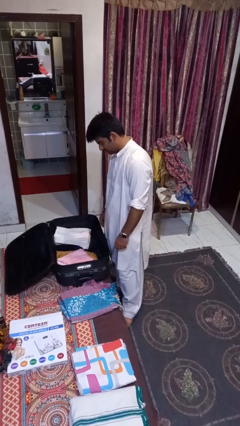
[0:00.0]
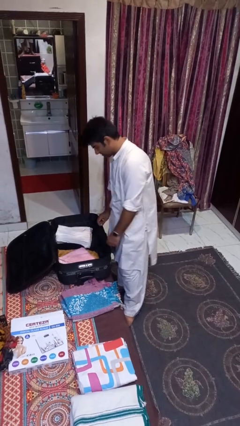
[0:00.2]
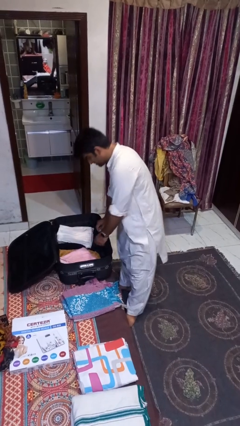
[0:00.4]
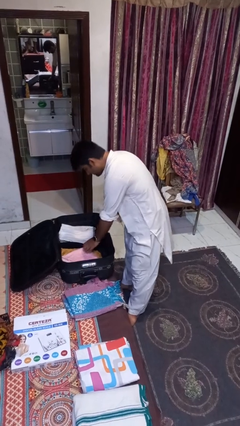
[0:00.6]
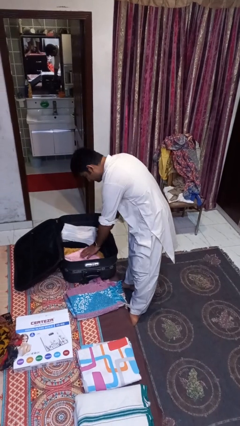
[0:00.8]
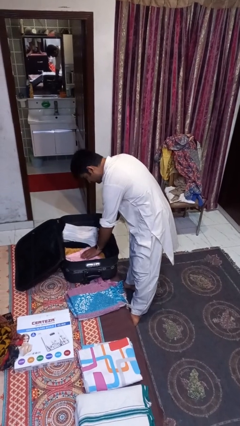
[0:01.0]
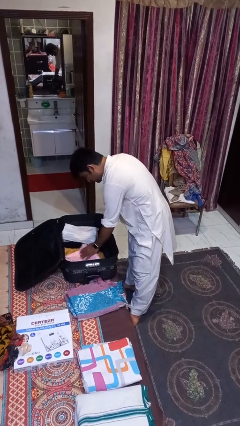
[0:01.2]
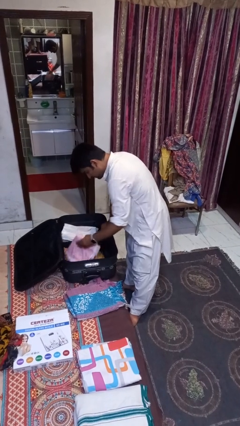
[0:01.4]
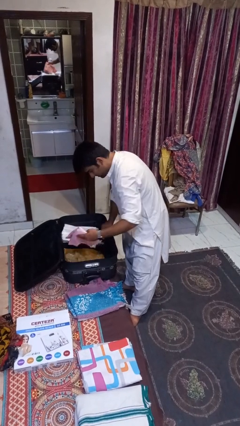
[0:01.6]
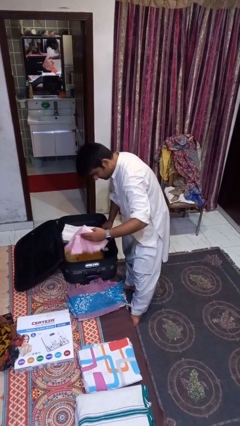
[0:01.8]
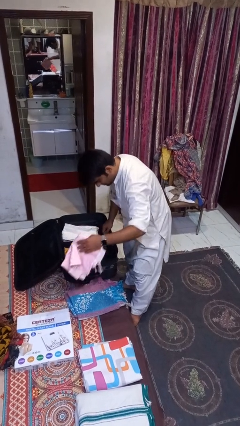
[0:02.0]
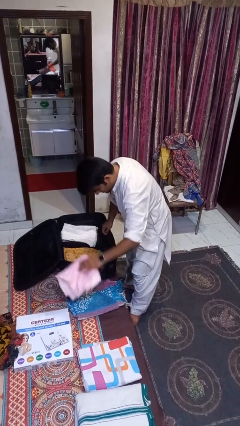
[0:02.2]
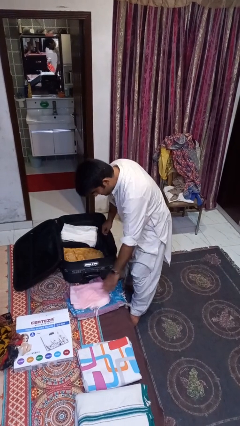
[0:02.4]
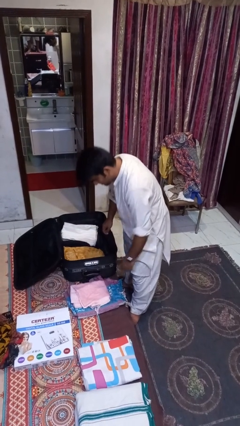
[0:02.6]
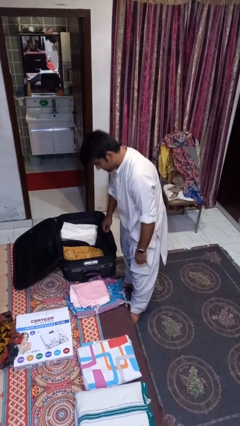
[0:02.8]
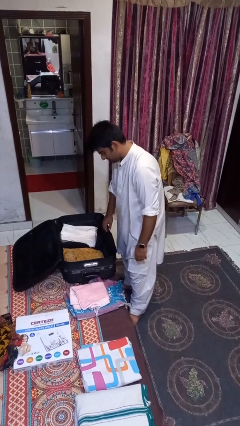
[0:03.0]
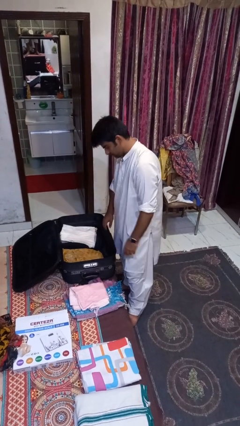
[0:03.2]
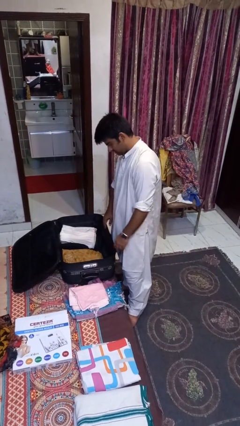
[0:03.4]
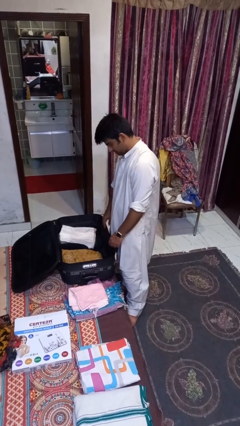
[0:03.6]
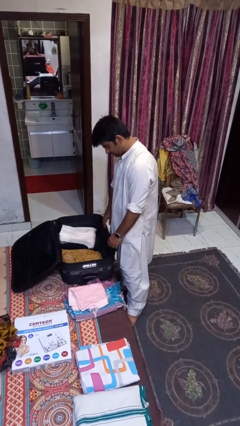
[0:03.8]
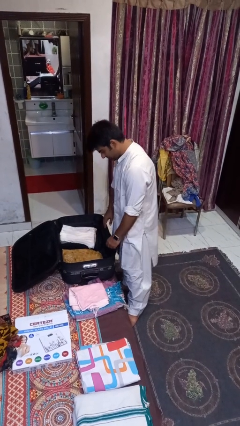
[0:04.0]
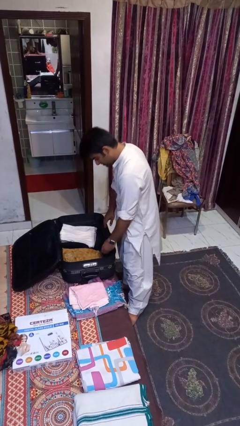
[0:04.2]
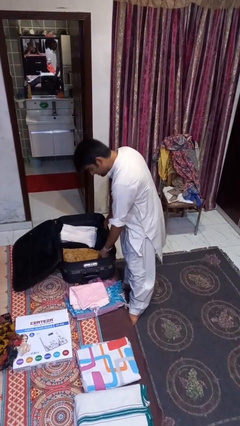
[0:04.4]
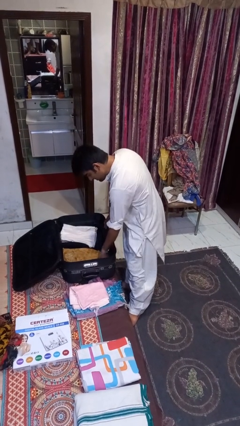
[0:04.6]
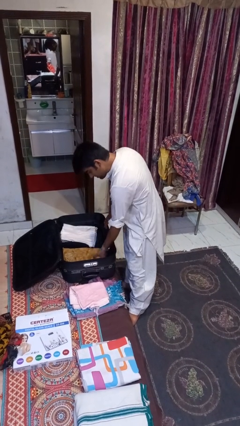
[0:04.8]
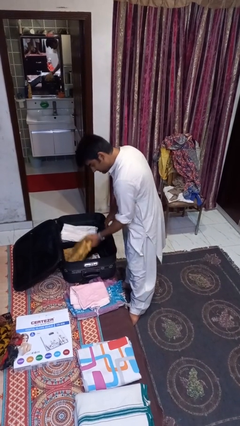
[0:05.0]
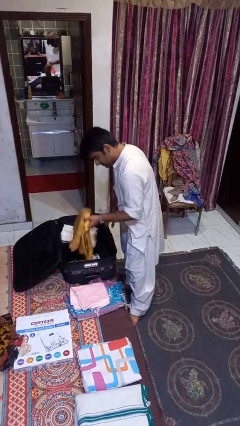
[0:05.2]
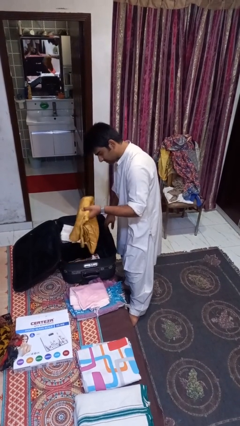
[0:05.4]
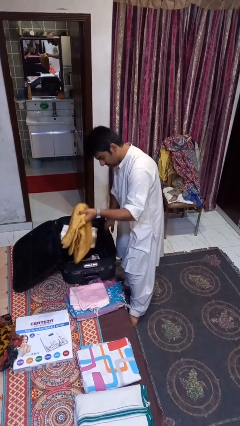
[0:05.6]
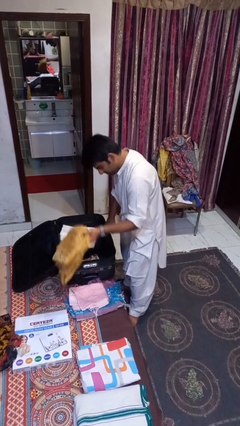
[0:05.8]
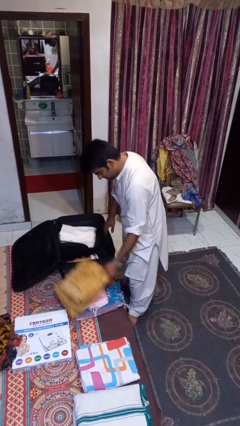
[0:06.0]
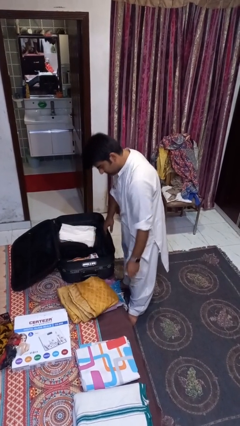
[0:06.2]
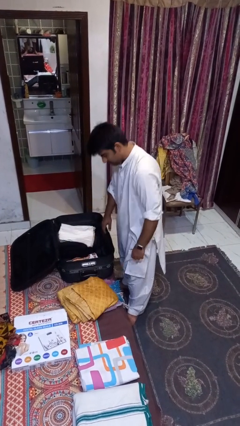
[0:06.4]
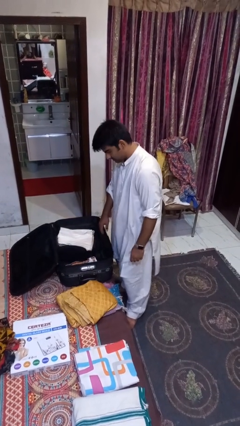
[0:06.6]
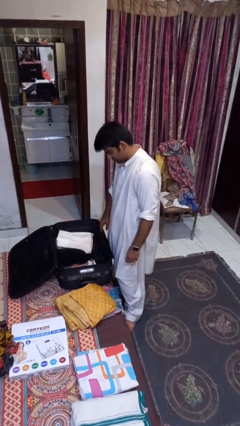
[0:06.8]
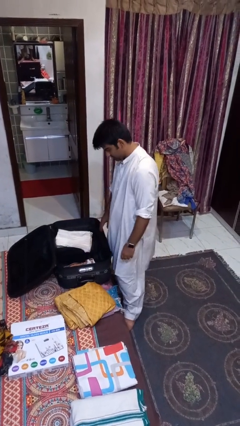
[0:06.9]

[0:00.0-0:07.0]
person unloads clothes from suitcase

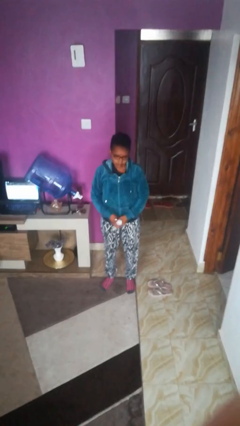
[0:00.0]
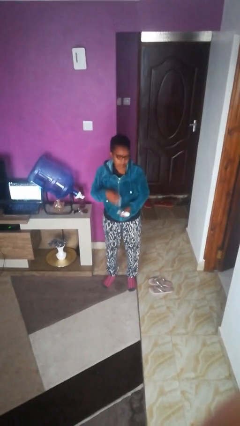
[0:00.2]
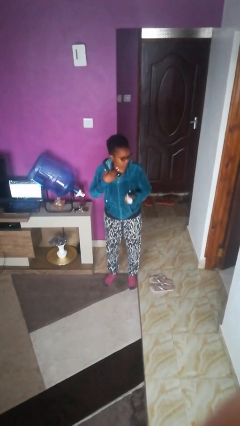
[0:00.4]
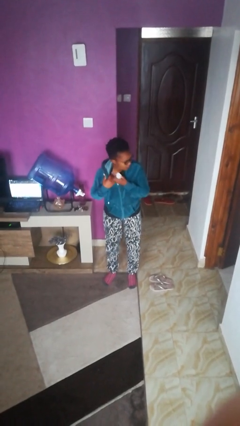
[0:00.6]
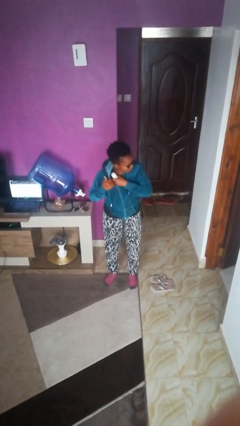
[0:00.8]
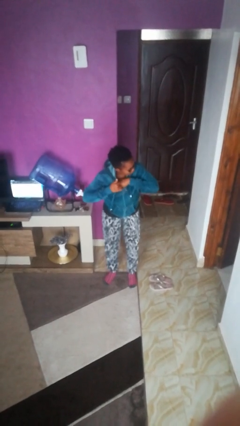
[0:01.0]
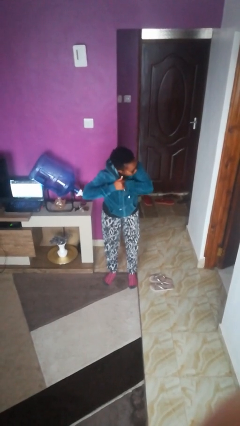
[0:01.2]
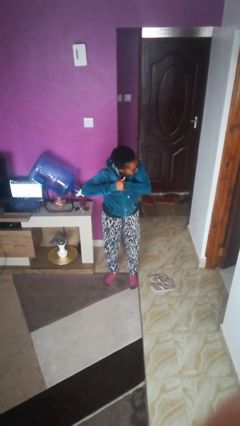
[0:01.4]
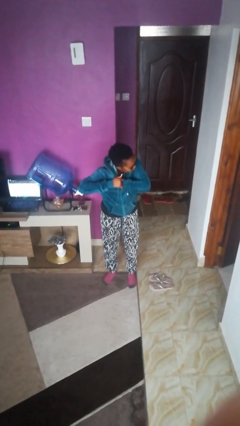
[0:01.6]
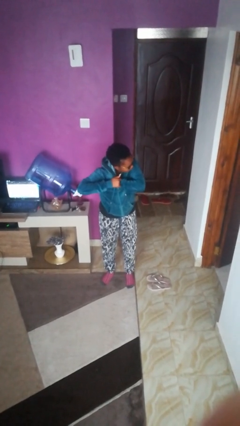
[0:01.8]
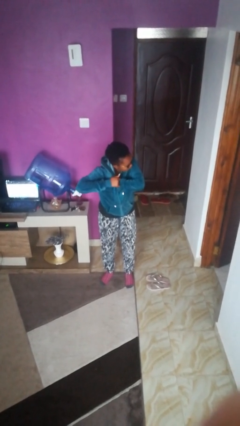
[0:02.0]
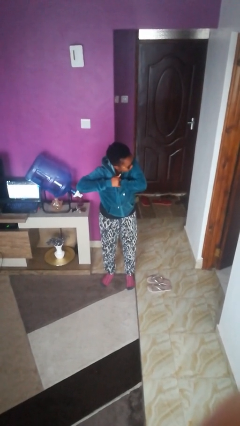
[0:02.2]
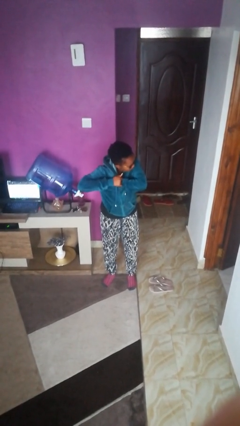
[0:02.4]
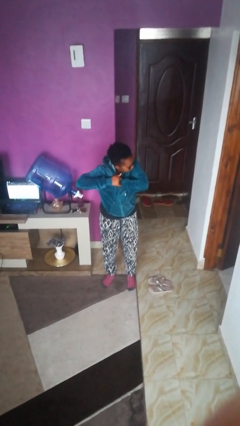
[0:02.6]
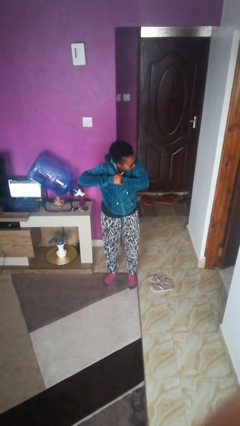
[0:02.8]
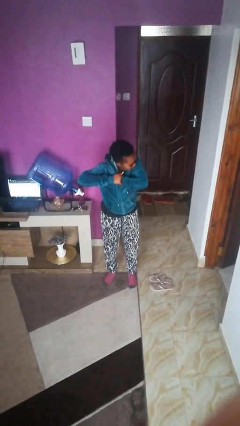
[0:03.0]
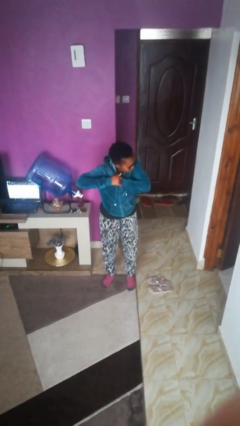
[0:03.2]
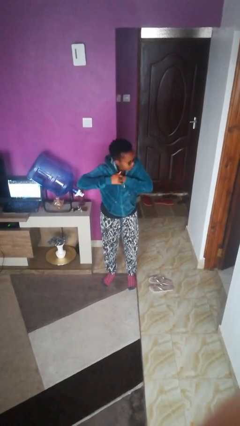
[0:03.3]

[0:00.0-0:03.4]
person applies deodorant

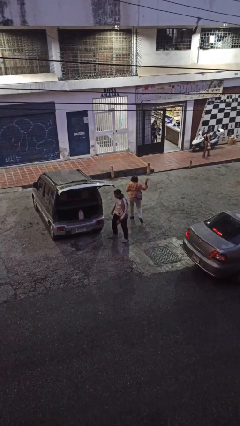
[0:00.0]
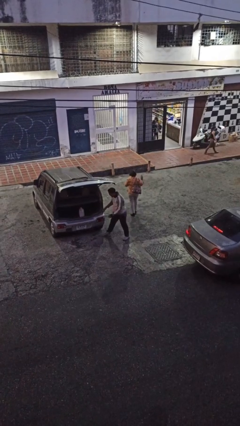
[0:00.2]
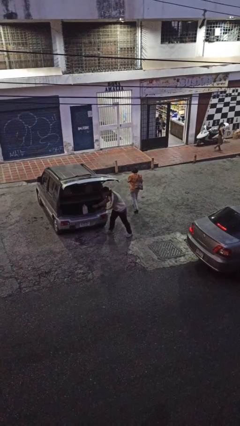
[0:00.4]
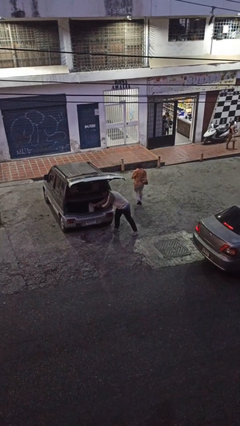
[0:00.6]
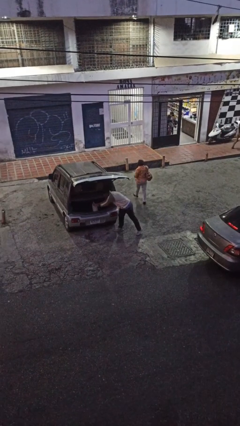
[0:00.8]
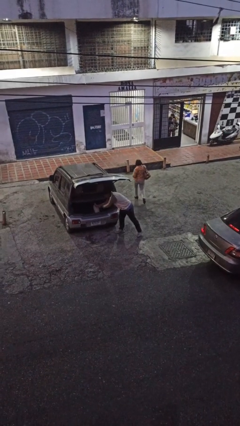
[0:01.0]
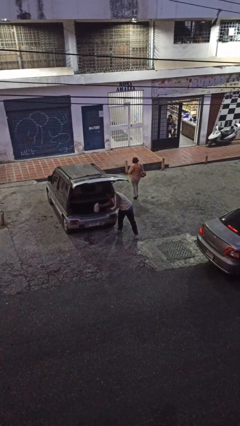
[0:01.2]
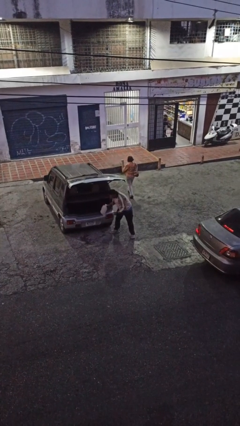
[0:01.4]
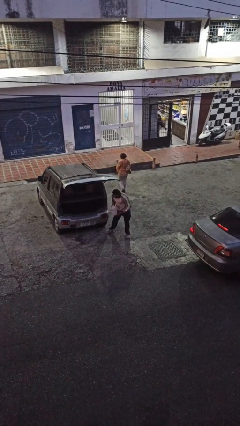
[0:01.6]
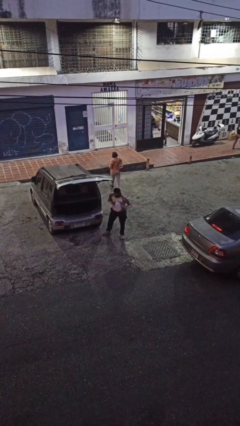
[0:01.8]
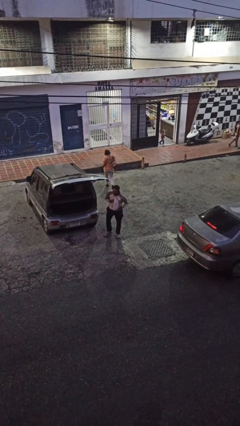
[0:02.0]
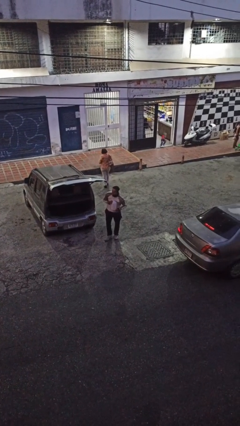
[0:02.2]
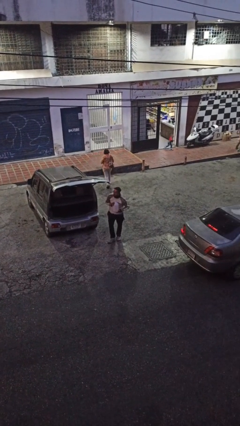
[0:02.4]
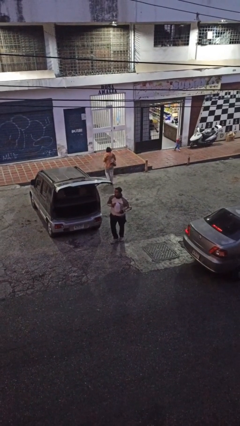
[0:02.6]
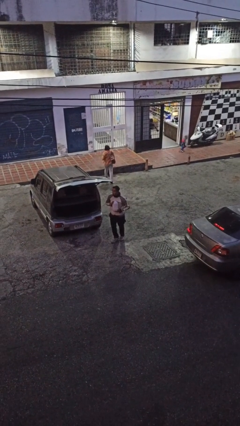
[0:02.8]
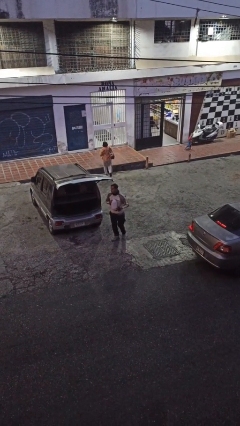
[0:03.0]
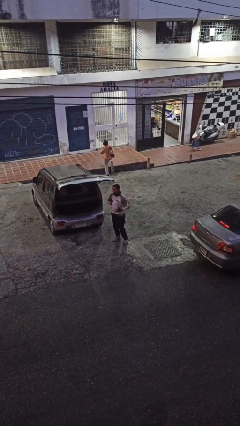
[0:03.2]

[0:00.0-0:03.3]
person unloads car

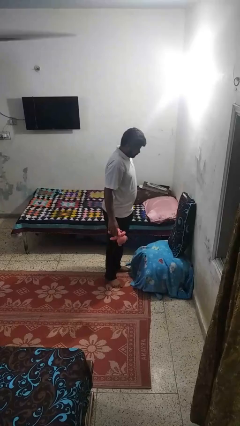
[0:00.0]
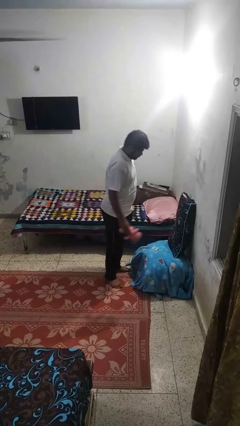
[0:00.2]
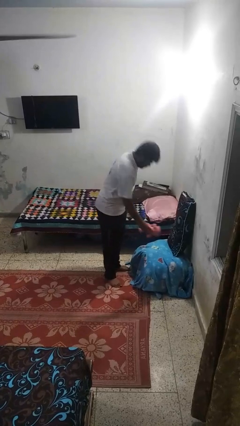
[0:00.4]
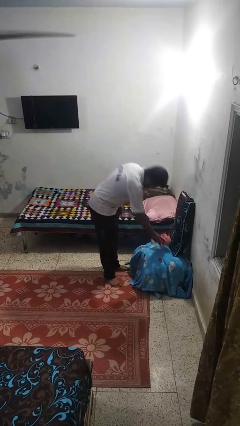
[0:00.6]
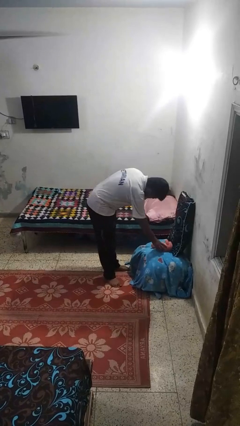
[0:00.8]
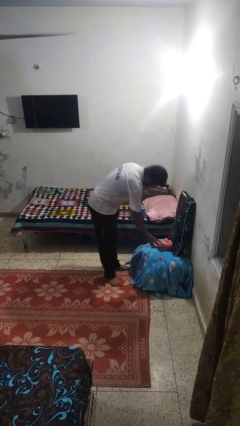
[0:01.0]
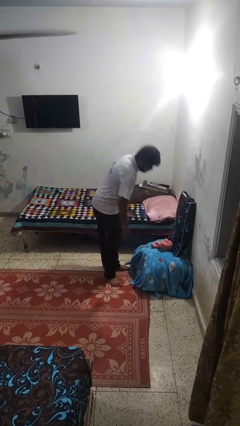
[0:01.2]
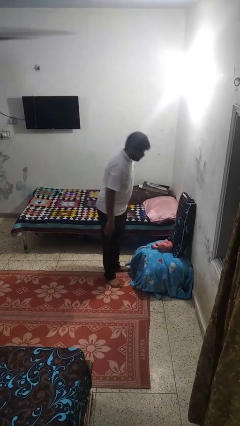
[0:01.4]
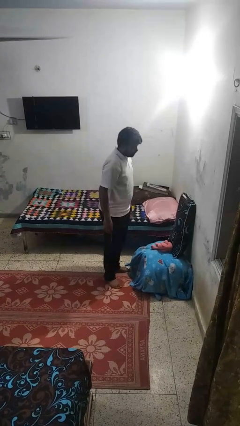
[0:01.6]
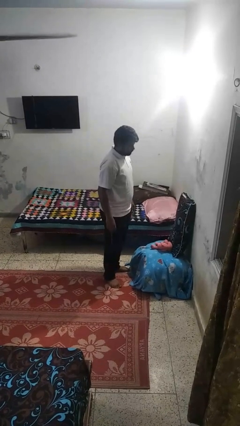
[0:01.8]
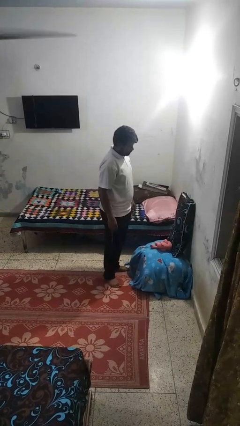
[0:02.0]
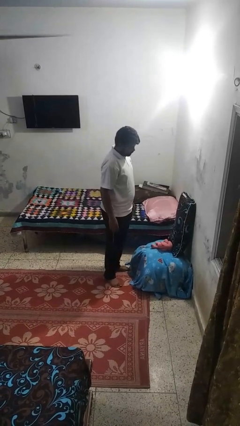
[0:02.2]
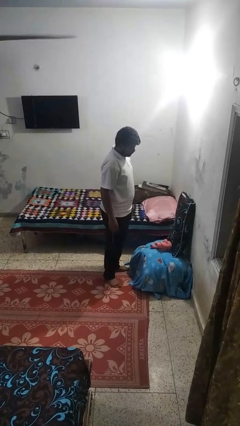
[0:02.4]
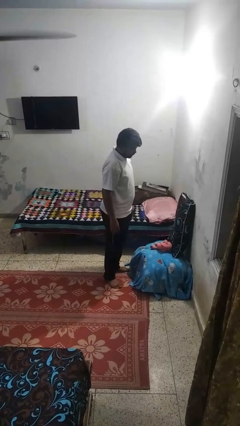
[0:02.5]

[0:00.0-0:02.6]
person puts down object on couch

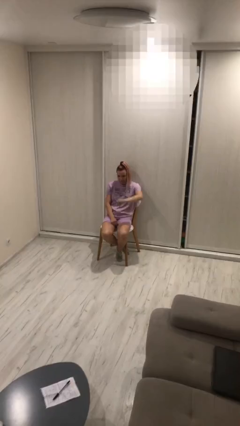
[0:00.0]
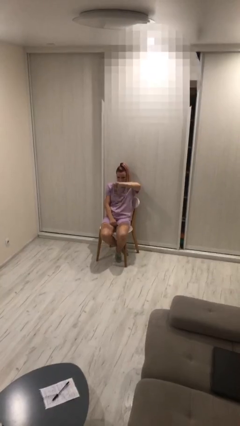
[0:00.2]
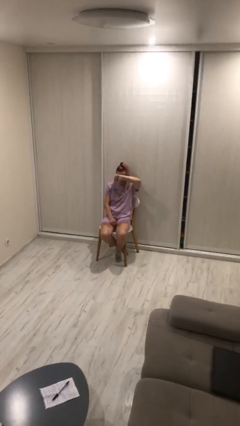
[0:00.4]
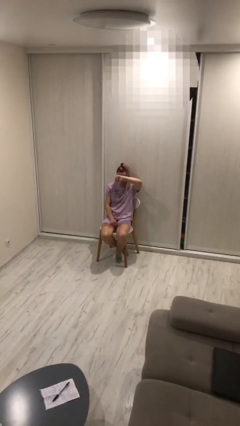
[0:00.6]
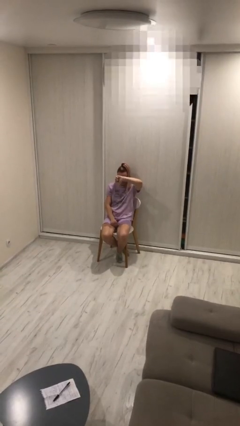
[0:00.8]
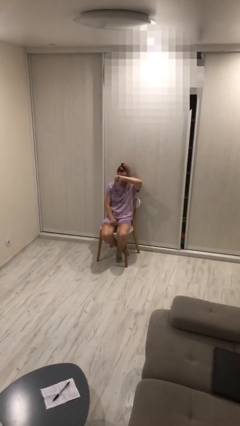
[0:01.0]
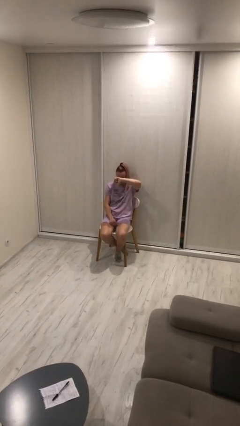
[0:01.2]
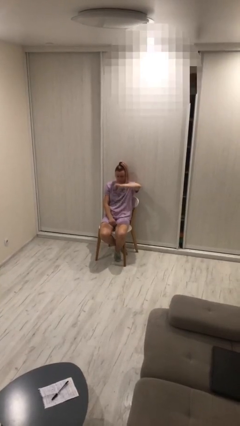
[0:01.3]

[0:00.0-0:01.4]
person gestures thumbs down
